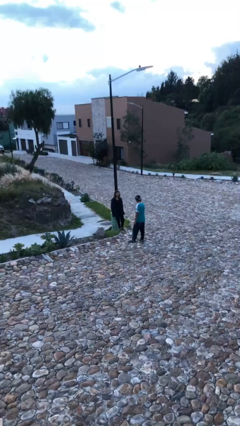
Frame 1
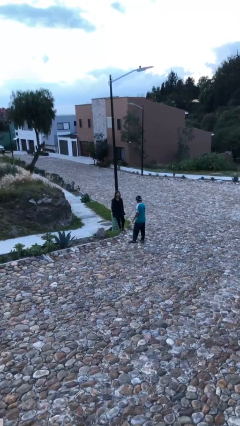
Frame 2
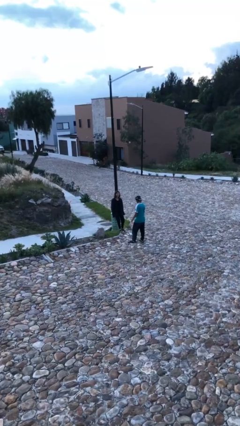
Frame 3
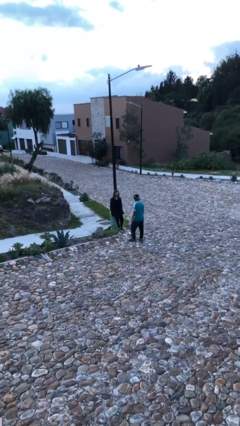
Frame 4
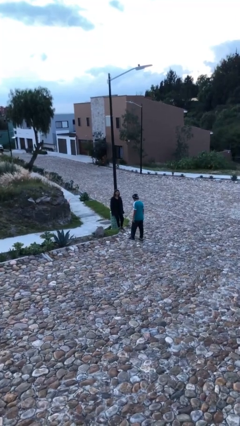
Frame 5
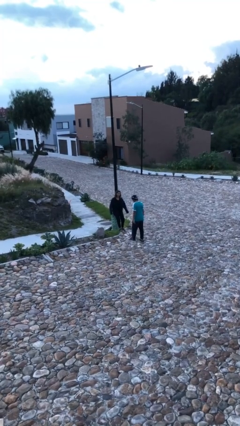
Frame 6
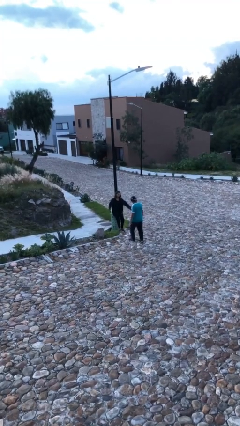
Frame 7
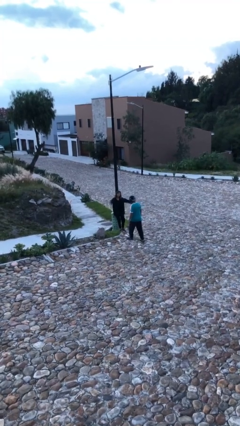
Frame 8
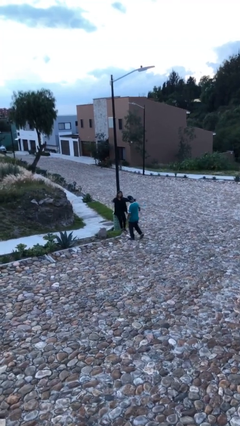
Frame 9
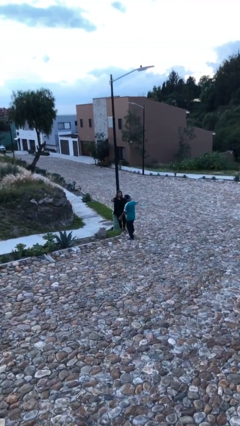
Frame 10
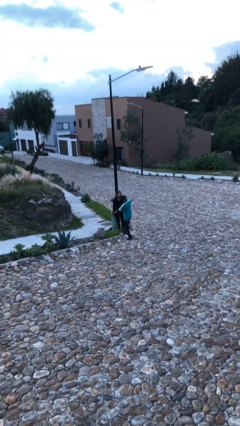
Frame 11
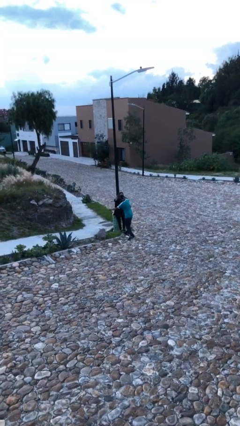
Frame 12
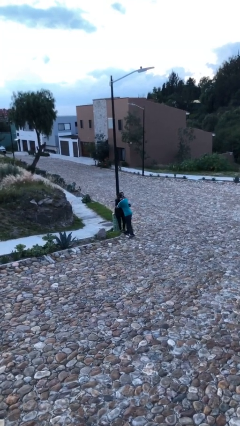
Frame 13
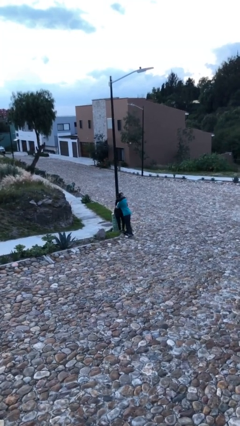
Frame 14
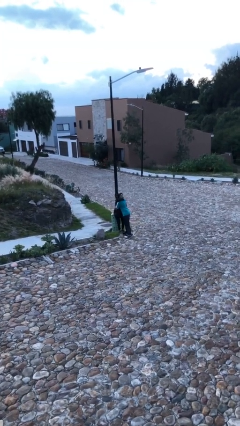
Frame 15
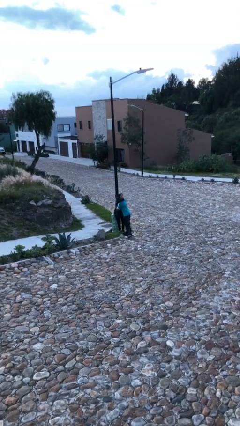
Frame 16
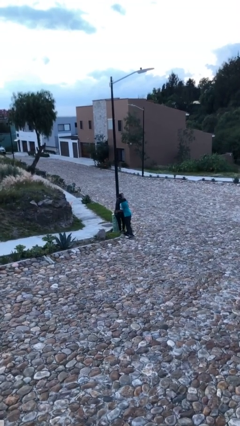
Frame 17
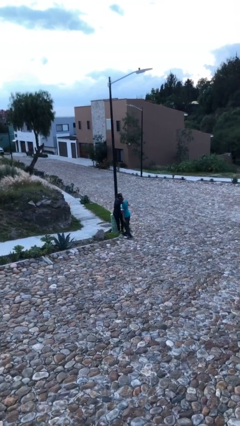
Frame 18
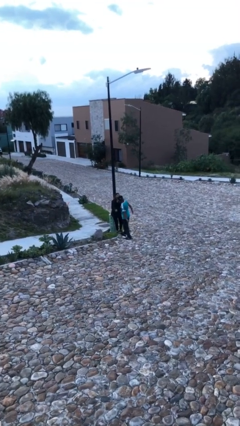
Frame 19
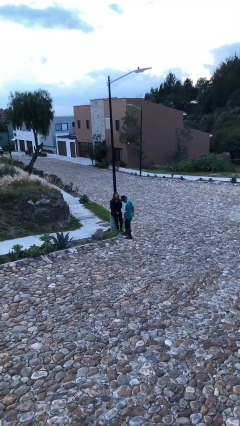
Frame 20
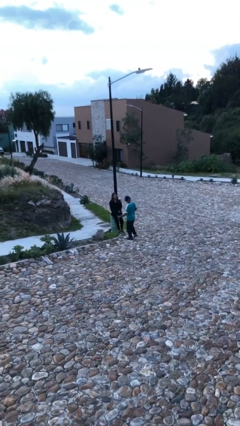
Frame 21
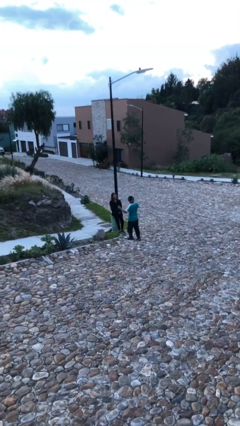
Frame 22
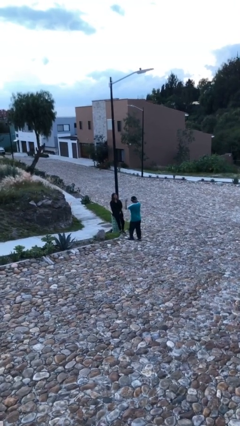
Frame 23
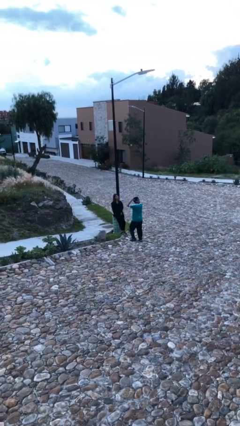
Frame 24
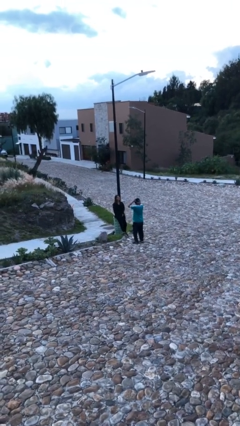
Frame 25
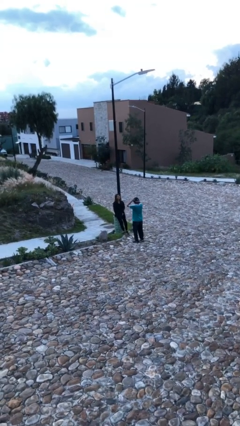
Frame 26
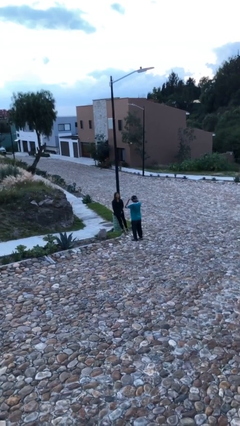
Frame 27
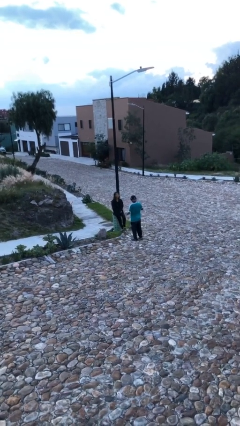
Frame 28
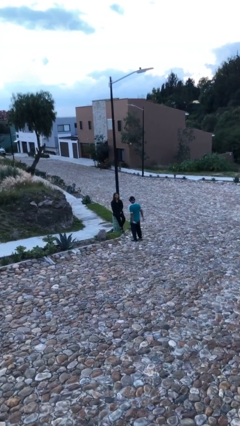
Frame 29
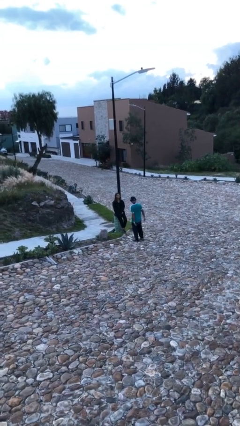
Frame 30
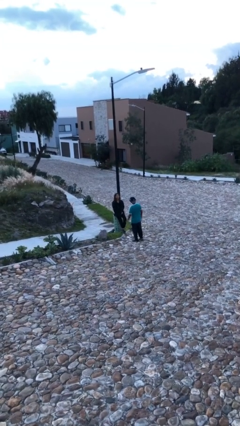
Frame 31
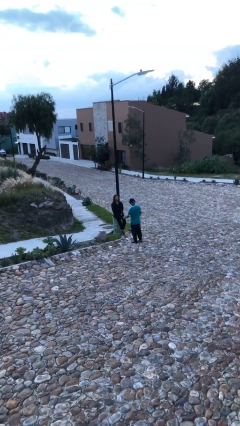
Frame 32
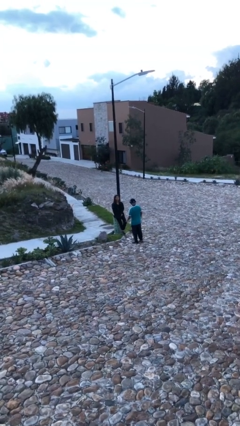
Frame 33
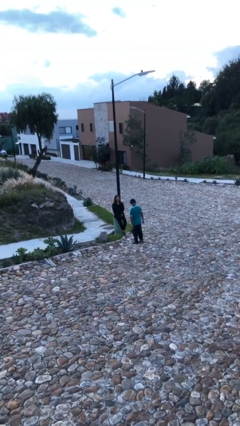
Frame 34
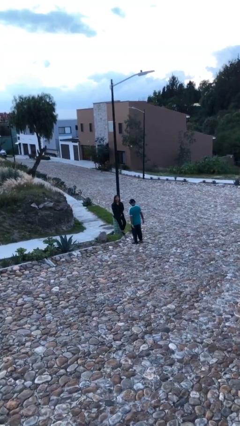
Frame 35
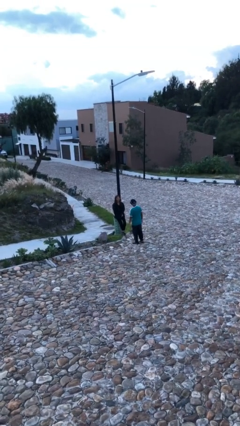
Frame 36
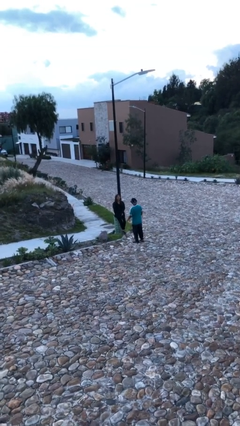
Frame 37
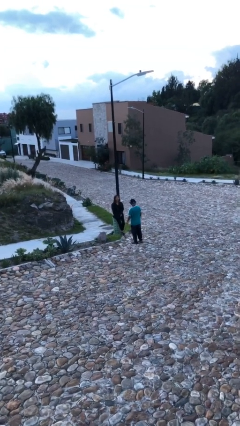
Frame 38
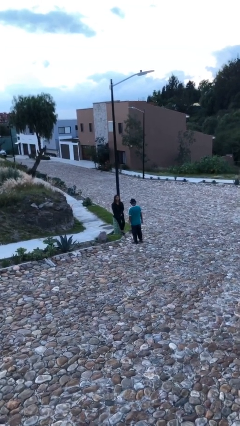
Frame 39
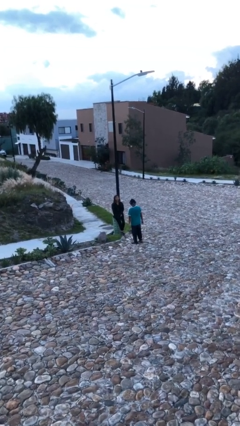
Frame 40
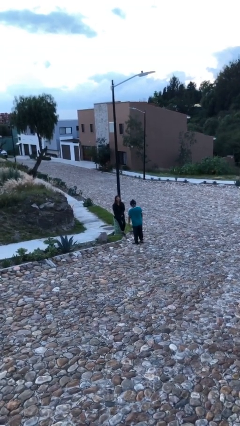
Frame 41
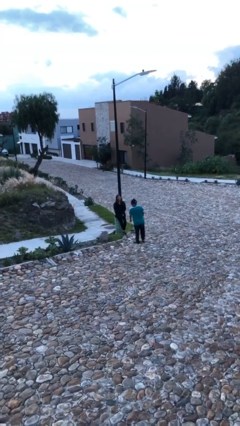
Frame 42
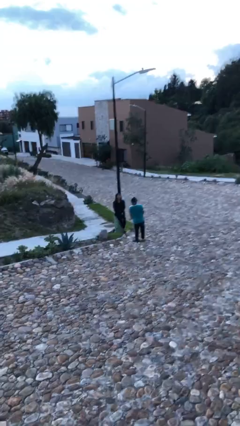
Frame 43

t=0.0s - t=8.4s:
person embraces person

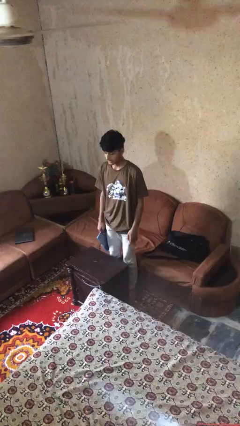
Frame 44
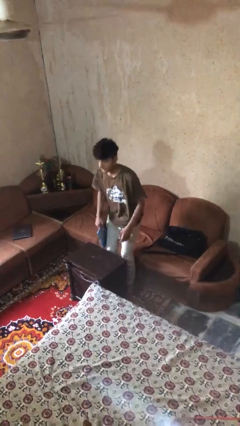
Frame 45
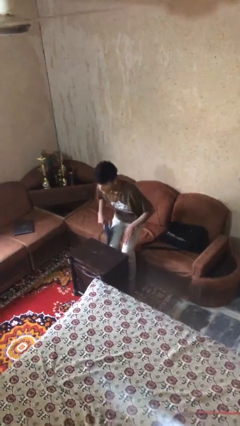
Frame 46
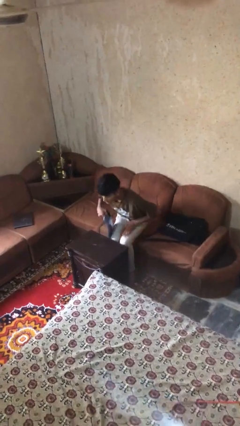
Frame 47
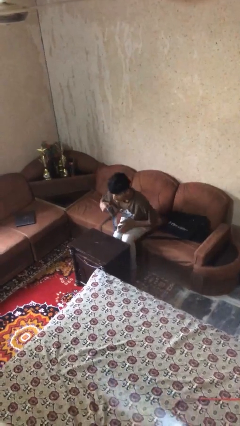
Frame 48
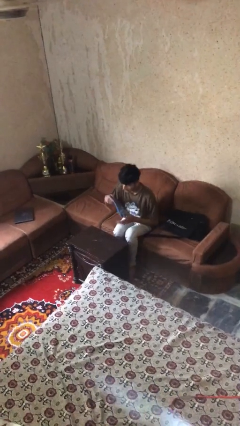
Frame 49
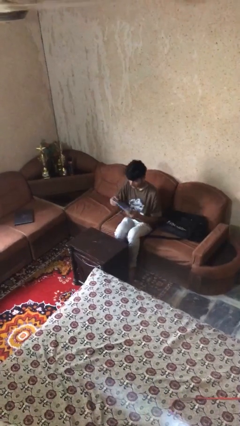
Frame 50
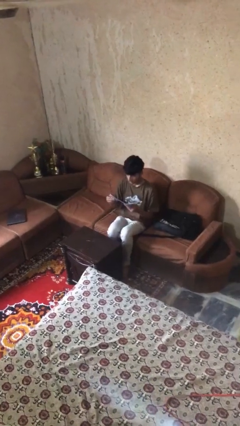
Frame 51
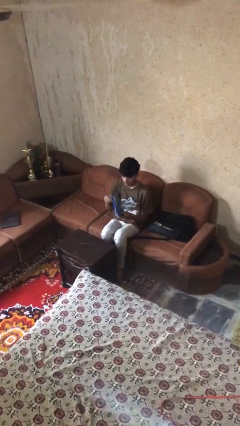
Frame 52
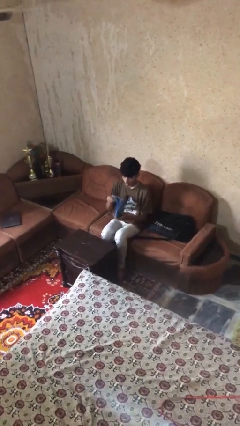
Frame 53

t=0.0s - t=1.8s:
person sits down

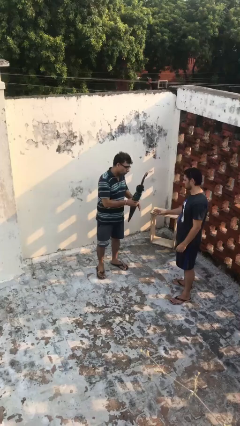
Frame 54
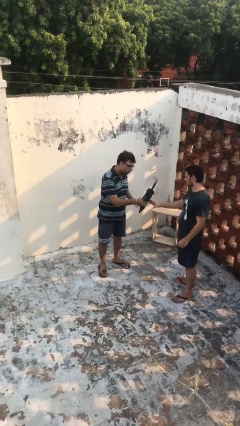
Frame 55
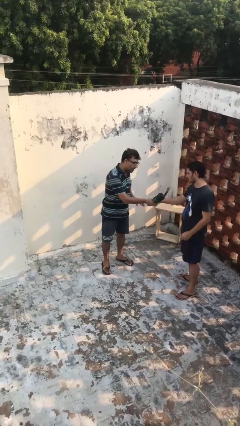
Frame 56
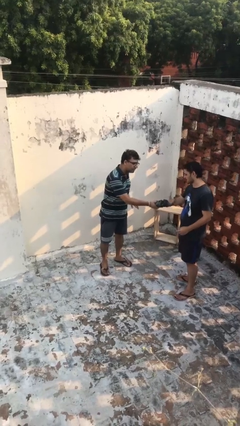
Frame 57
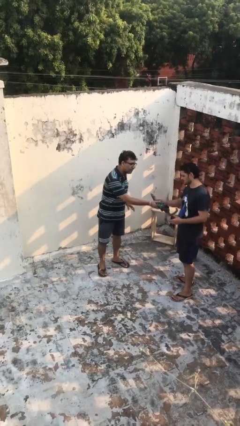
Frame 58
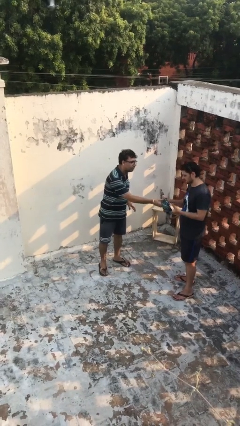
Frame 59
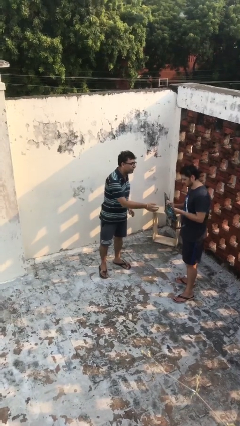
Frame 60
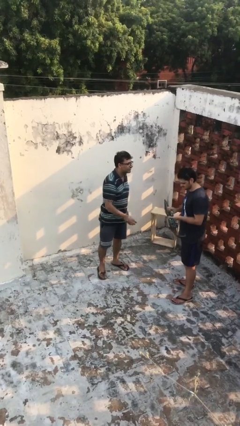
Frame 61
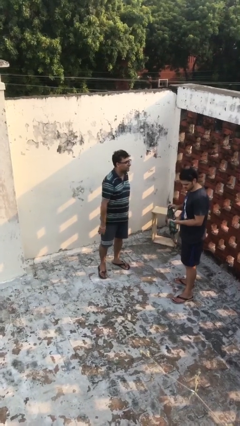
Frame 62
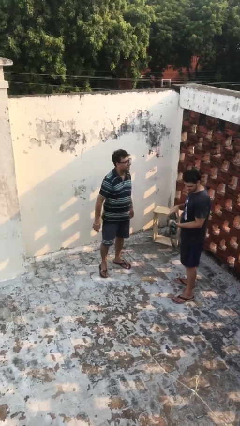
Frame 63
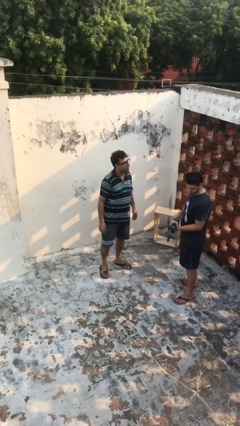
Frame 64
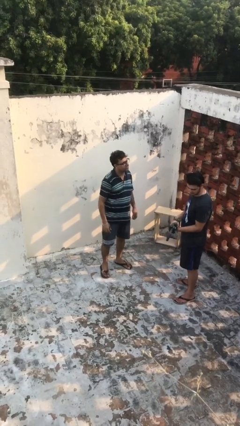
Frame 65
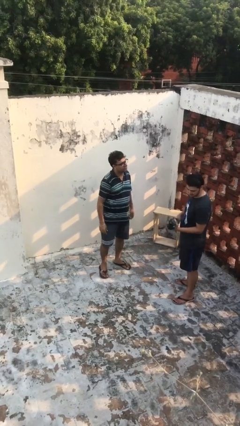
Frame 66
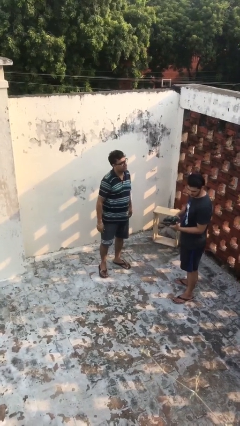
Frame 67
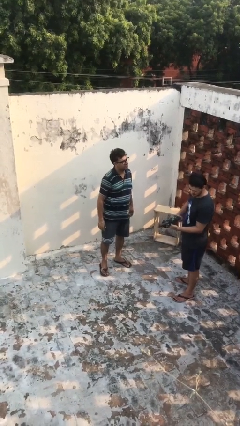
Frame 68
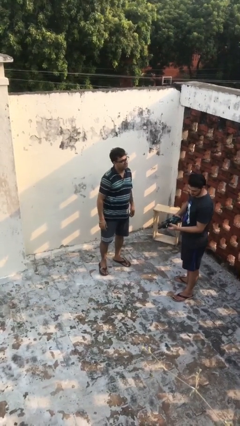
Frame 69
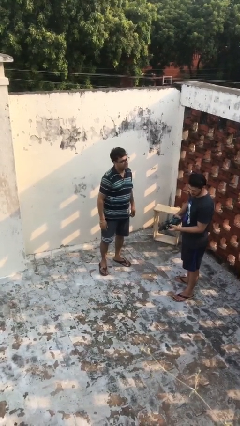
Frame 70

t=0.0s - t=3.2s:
person transfers object to person

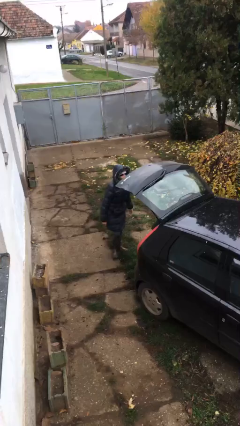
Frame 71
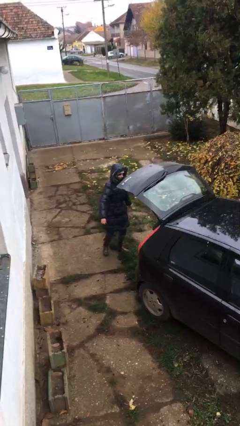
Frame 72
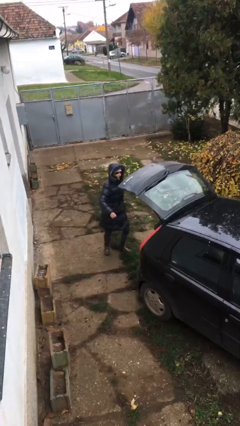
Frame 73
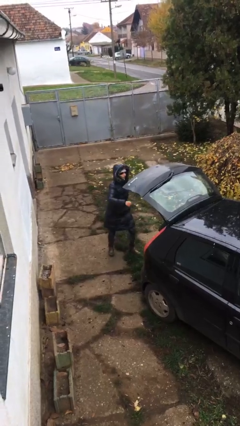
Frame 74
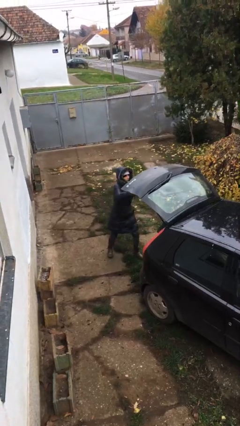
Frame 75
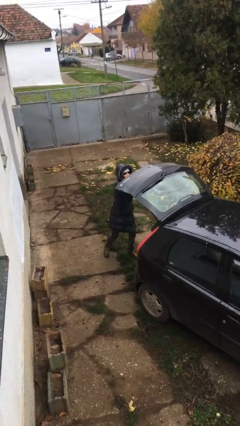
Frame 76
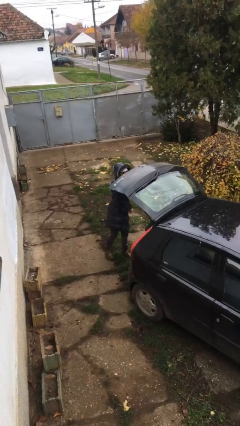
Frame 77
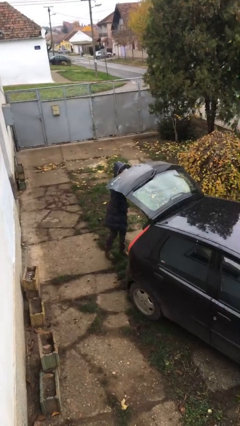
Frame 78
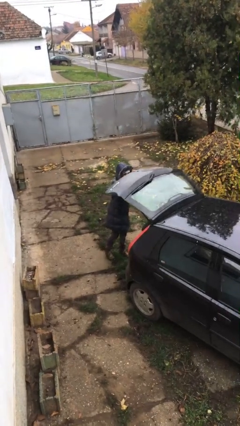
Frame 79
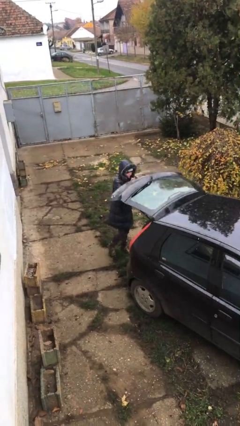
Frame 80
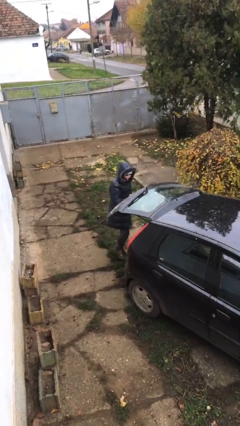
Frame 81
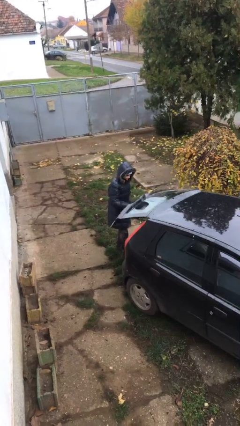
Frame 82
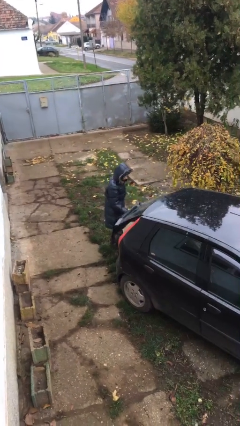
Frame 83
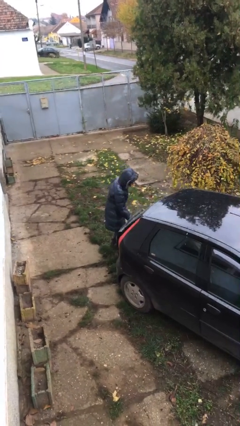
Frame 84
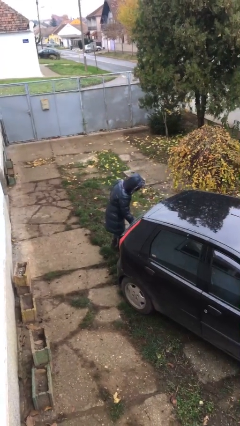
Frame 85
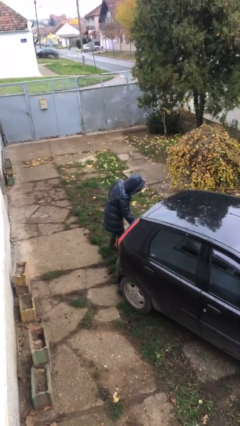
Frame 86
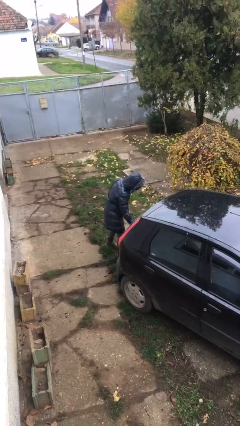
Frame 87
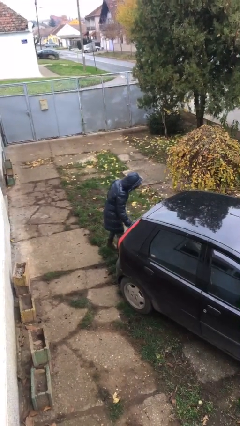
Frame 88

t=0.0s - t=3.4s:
person closes car trunk

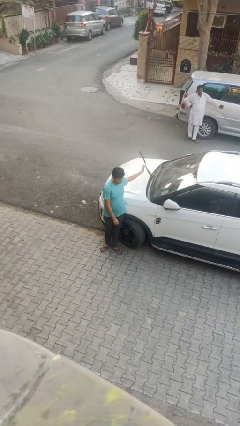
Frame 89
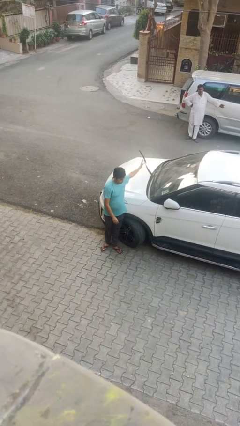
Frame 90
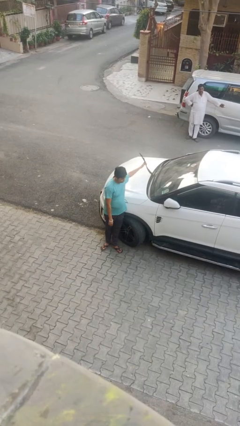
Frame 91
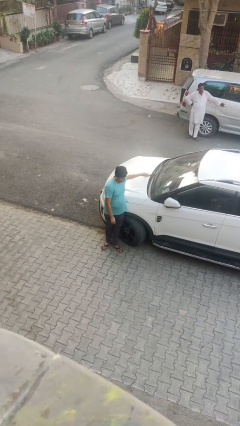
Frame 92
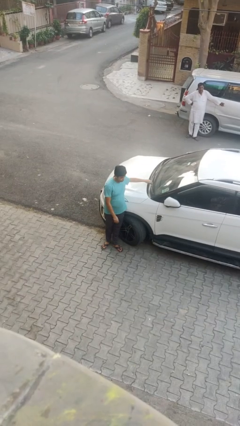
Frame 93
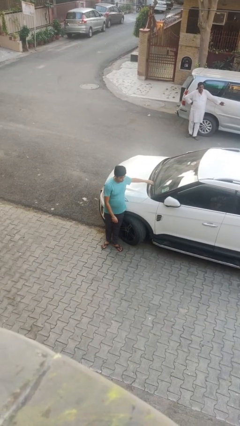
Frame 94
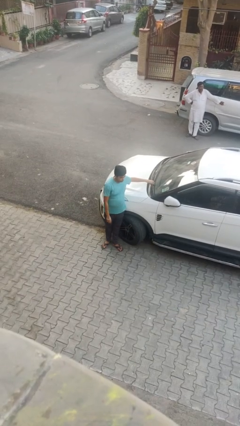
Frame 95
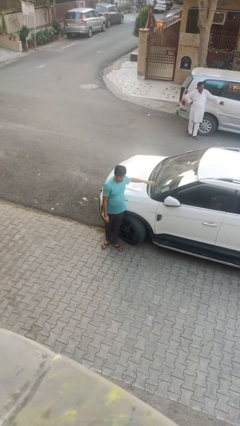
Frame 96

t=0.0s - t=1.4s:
person flips down car wipers
